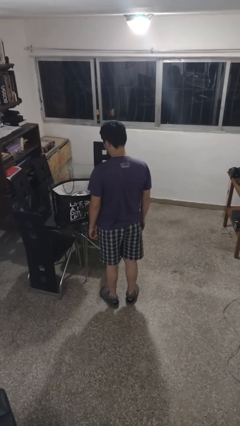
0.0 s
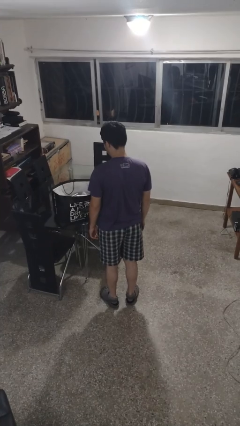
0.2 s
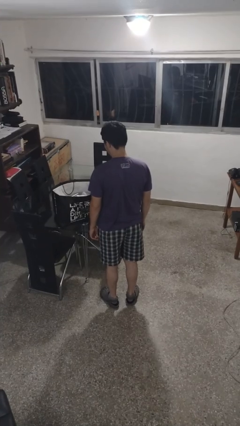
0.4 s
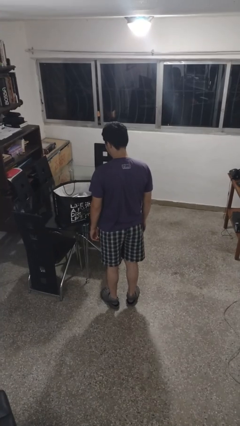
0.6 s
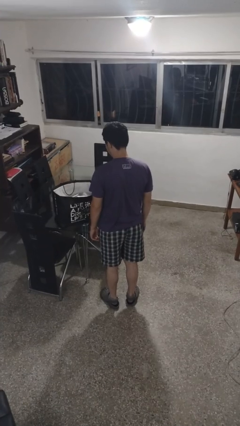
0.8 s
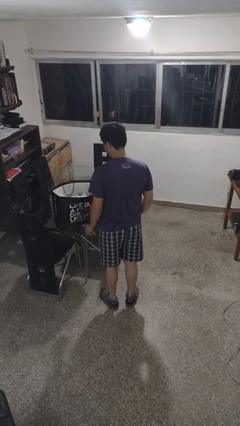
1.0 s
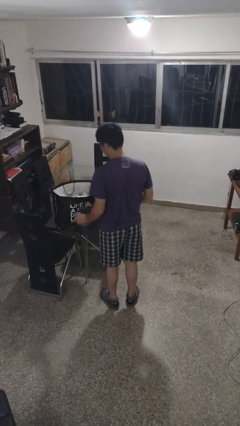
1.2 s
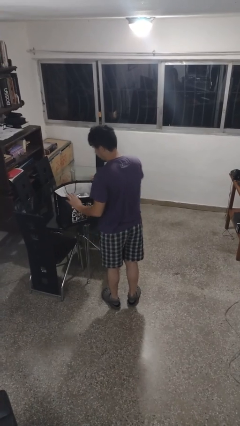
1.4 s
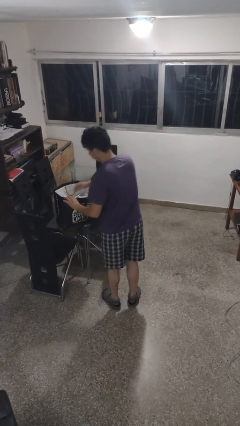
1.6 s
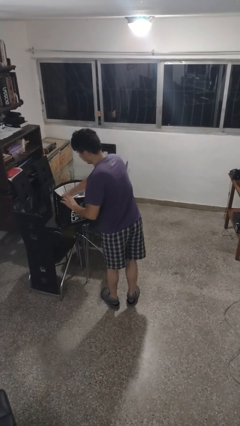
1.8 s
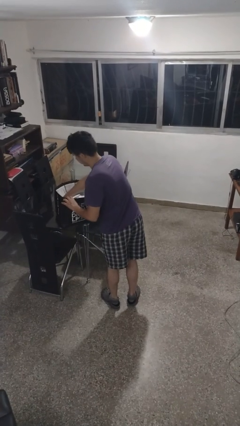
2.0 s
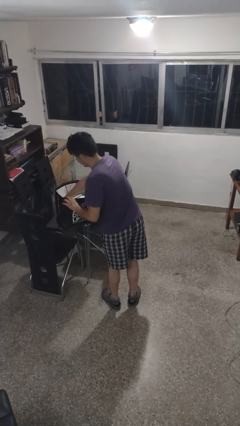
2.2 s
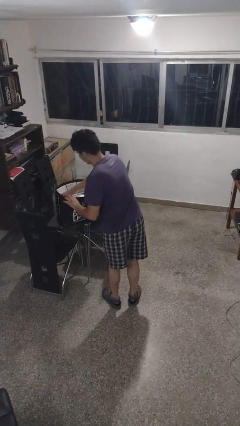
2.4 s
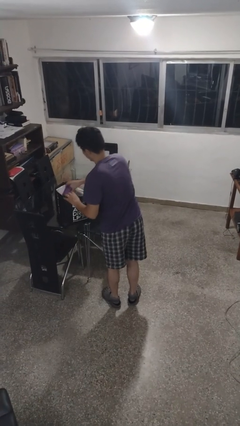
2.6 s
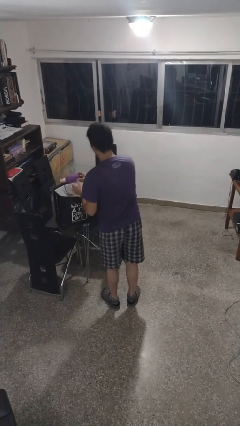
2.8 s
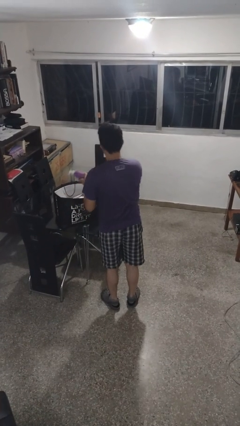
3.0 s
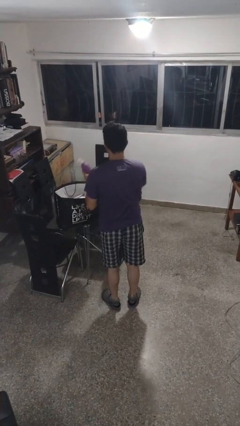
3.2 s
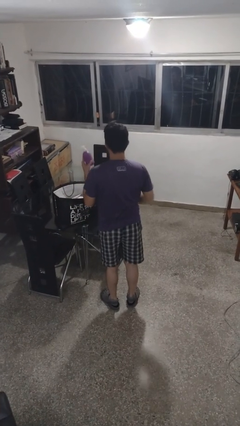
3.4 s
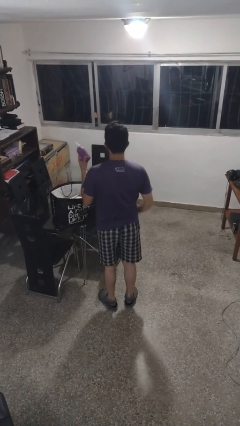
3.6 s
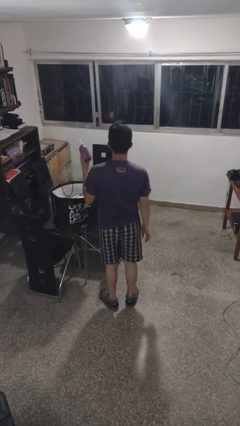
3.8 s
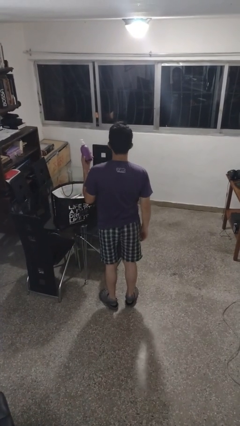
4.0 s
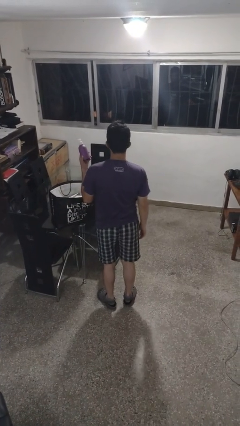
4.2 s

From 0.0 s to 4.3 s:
person takes object from bag

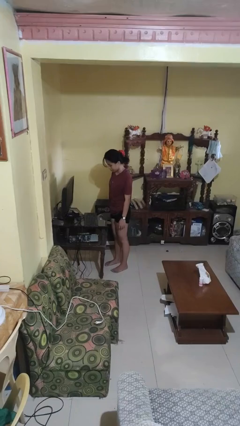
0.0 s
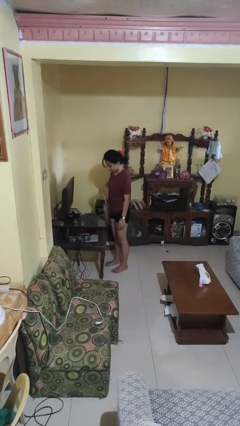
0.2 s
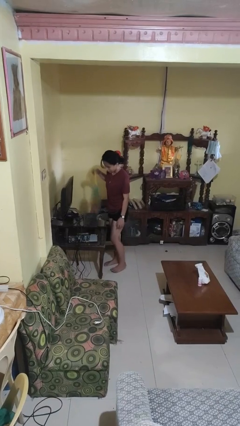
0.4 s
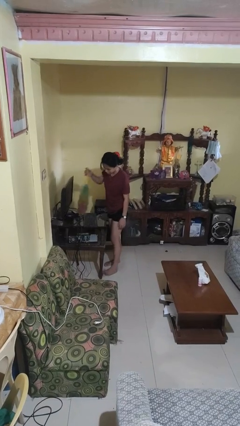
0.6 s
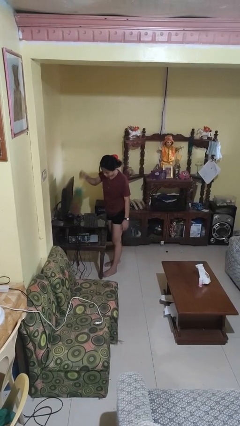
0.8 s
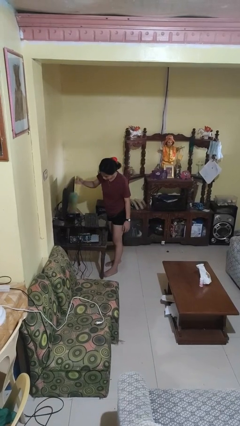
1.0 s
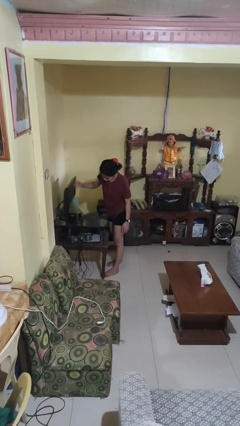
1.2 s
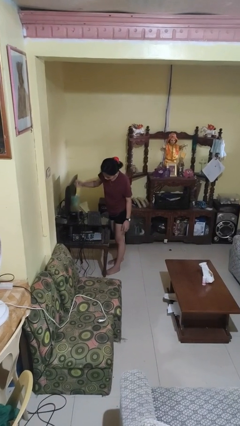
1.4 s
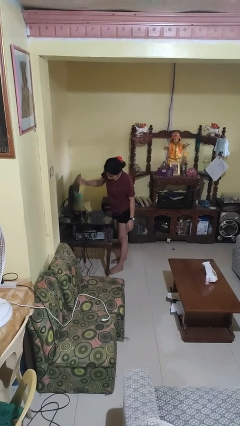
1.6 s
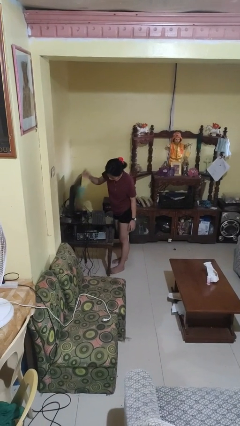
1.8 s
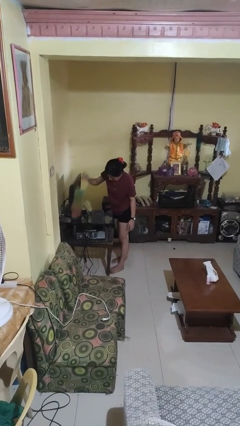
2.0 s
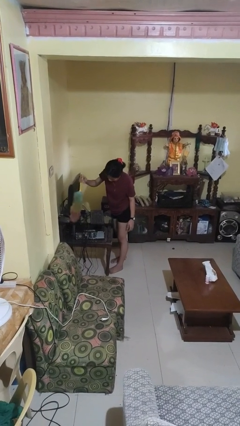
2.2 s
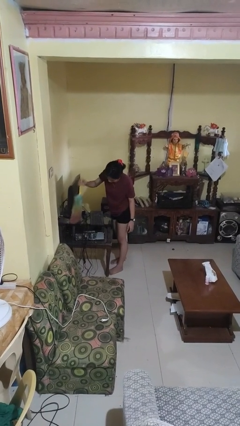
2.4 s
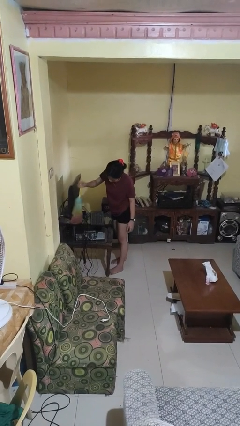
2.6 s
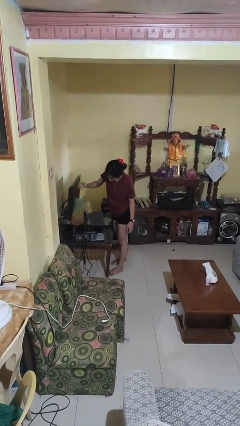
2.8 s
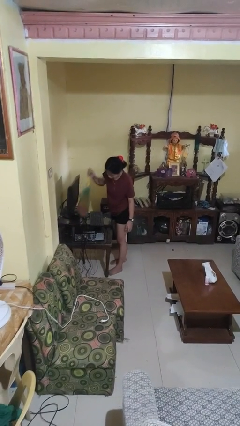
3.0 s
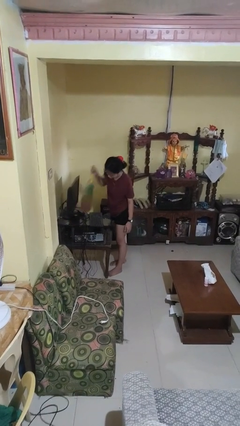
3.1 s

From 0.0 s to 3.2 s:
person dusts furniture

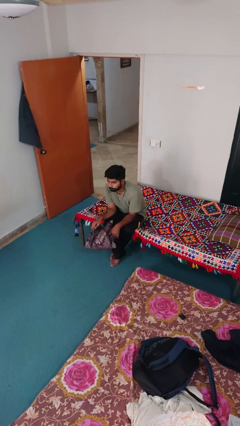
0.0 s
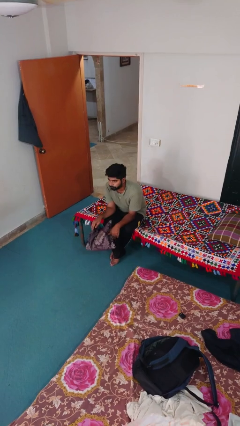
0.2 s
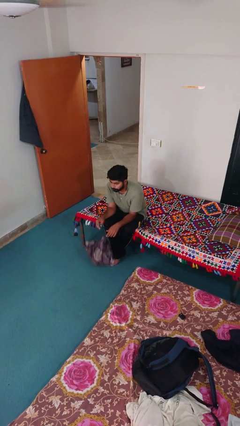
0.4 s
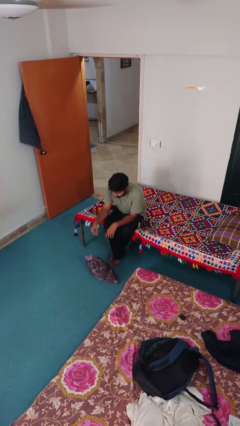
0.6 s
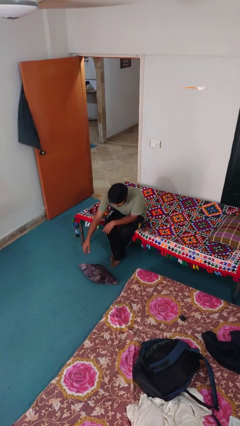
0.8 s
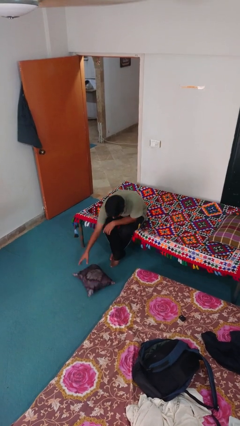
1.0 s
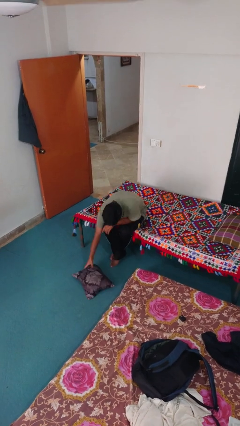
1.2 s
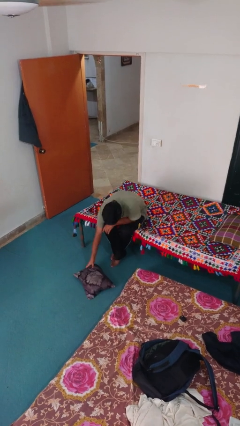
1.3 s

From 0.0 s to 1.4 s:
person drops object

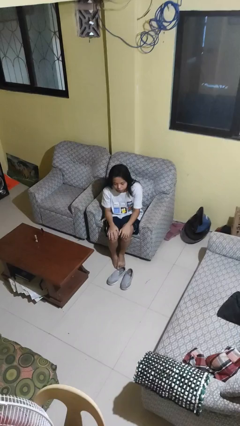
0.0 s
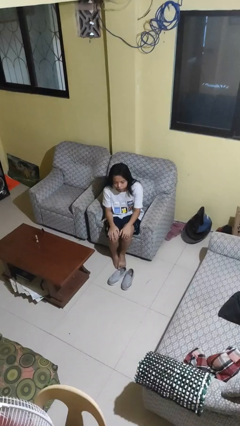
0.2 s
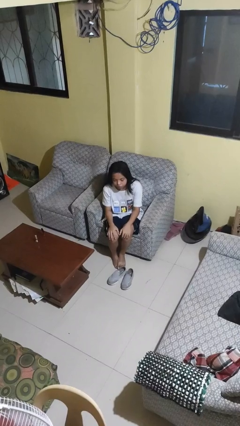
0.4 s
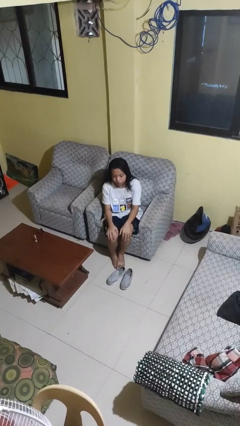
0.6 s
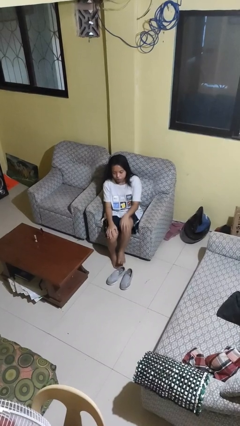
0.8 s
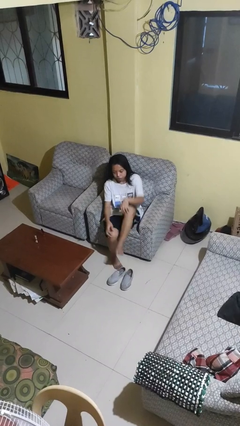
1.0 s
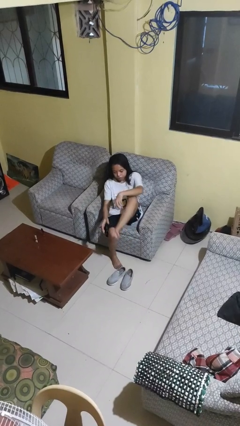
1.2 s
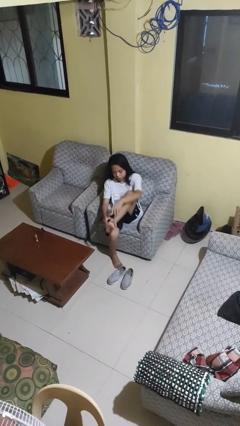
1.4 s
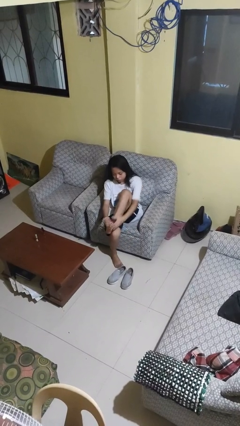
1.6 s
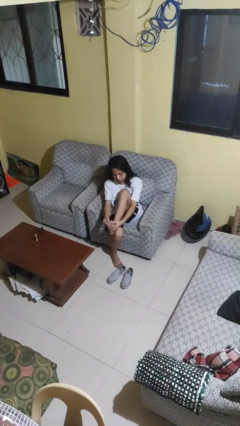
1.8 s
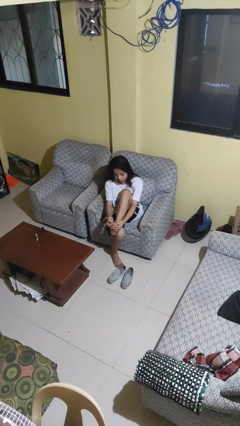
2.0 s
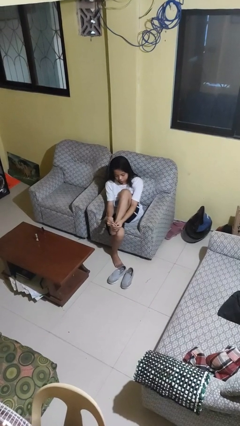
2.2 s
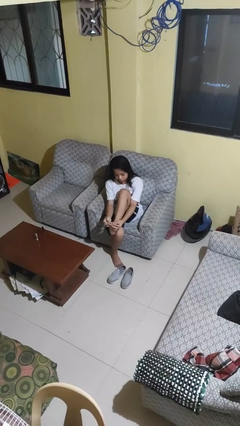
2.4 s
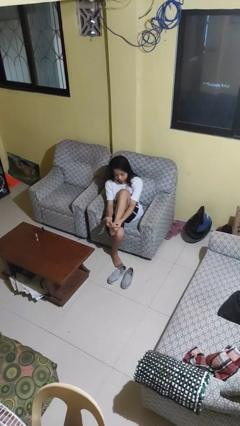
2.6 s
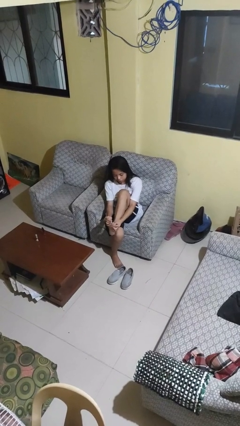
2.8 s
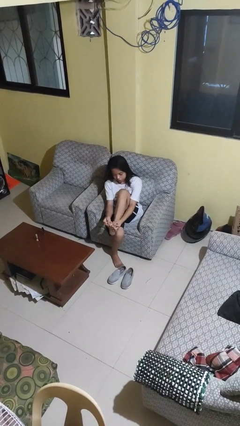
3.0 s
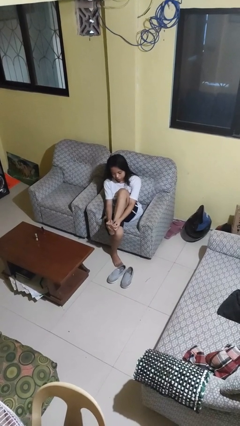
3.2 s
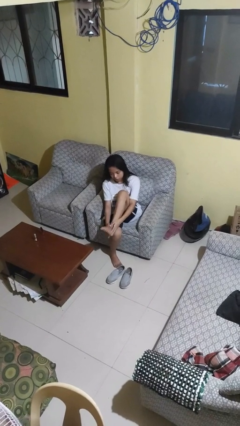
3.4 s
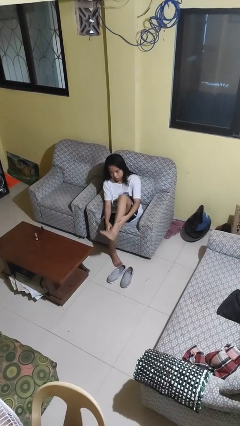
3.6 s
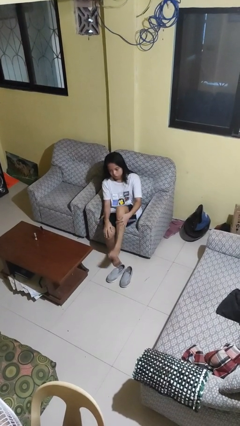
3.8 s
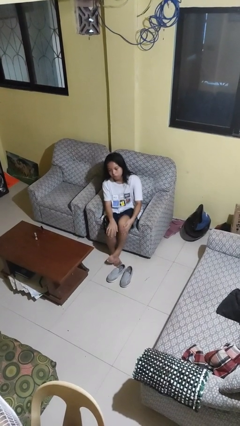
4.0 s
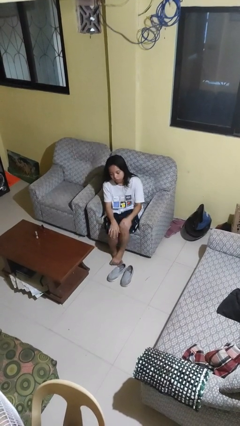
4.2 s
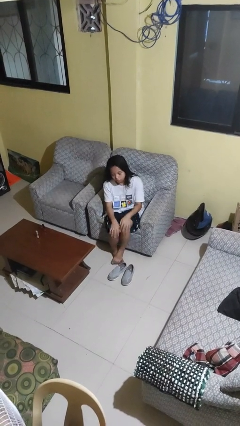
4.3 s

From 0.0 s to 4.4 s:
person rubs foot

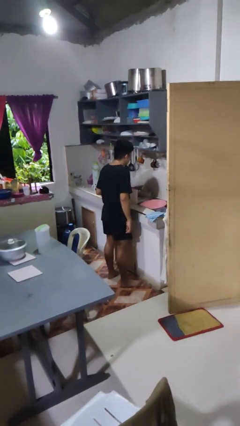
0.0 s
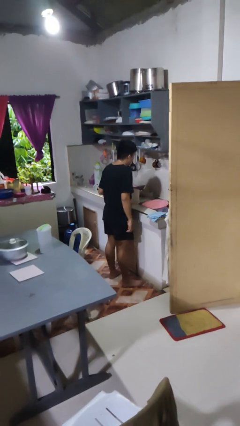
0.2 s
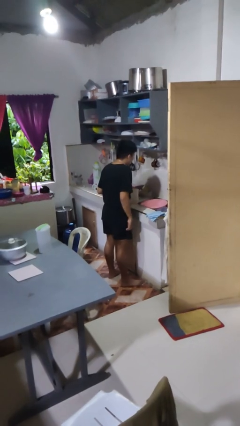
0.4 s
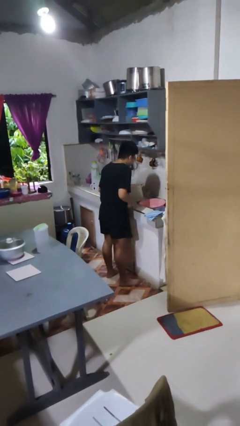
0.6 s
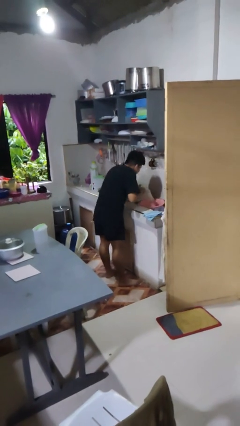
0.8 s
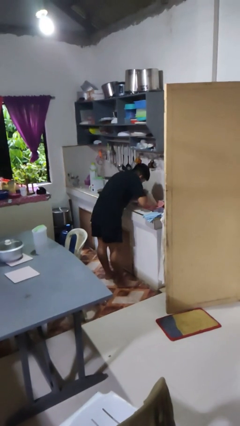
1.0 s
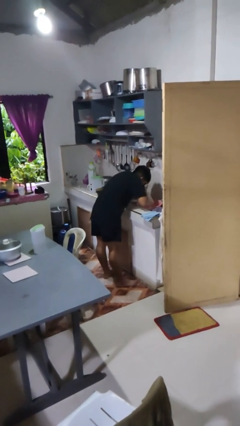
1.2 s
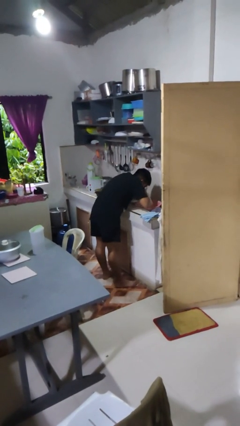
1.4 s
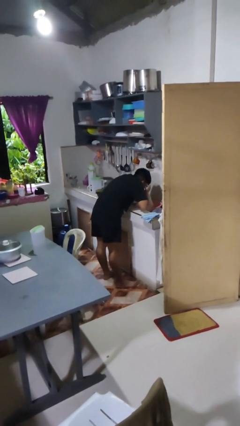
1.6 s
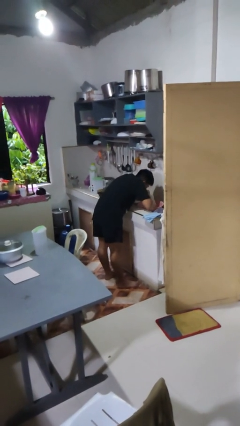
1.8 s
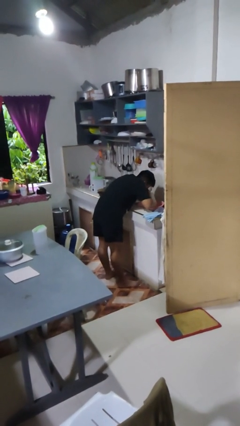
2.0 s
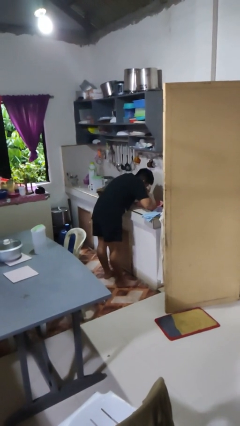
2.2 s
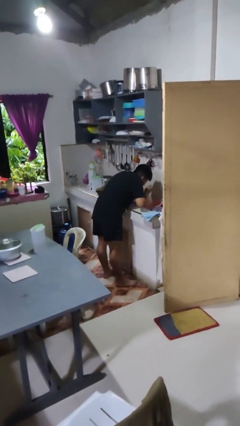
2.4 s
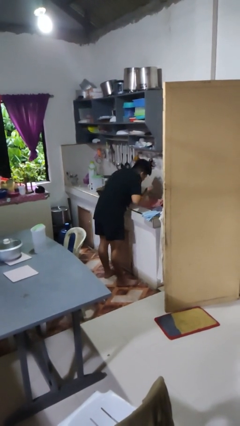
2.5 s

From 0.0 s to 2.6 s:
person washes face

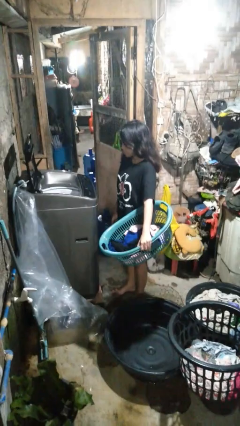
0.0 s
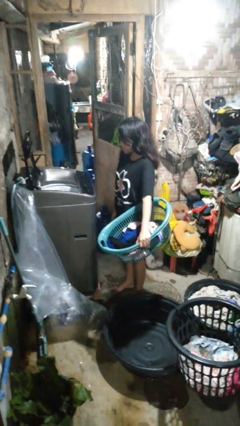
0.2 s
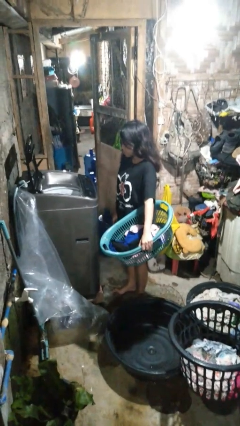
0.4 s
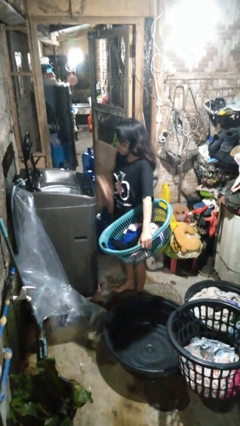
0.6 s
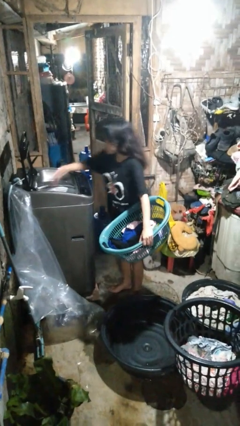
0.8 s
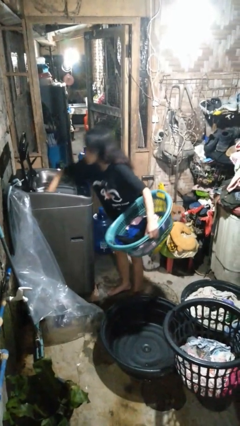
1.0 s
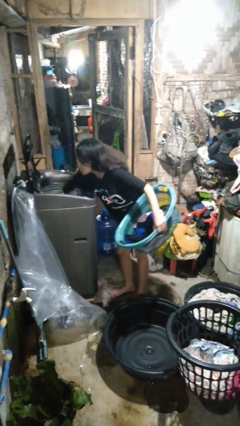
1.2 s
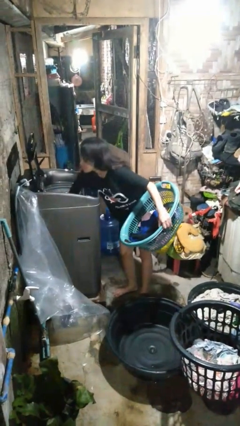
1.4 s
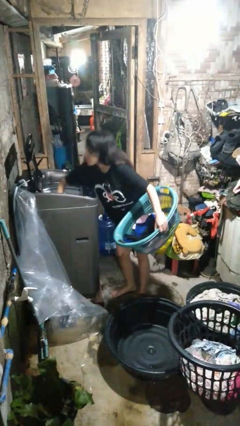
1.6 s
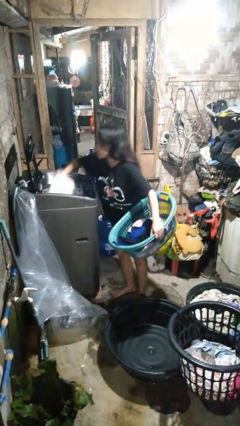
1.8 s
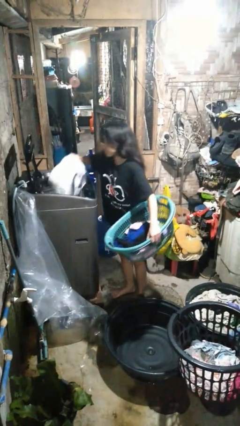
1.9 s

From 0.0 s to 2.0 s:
person loads clotheswasher
